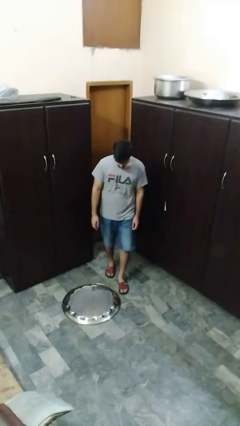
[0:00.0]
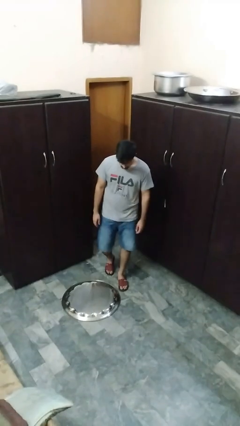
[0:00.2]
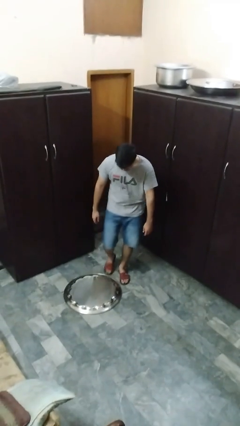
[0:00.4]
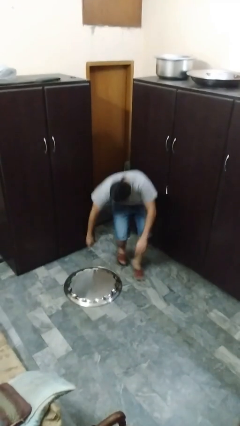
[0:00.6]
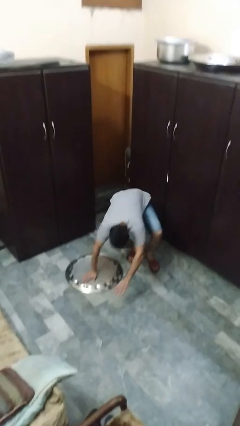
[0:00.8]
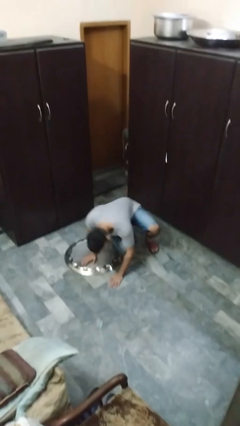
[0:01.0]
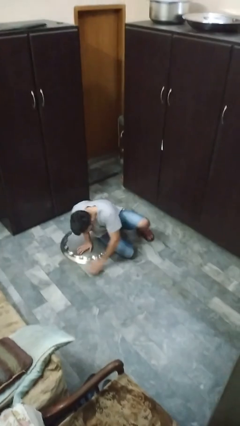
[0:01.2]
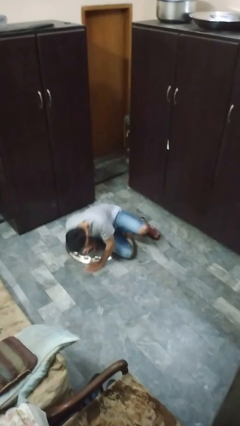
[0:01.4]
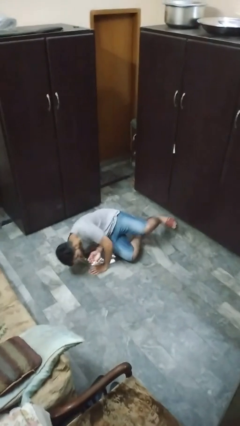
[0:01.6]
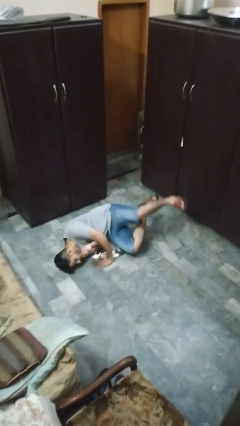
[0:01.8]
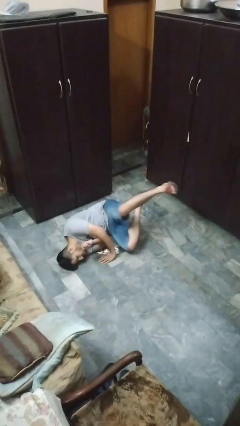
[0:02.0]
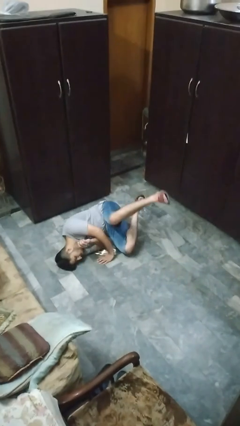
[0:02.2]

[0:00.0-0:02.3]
person trips on object on floor

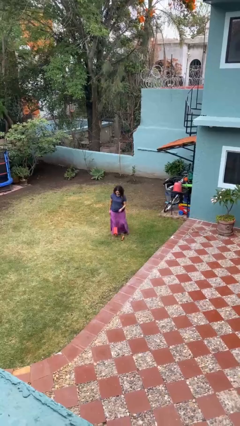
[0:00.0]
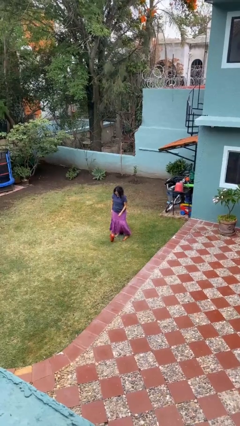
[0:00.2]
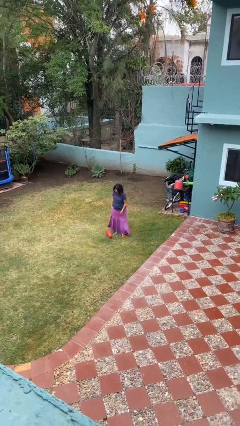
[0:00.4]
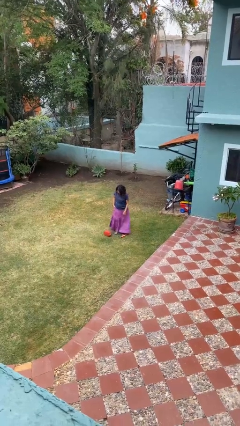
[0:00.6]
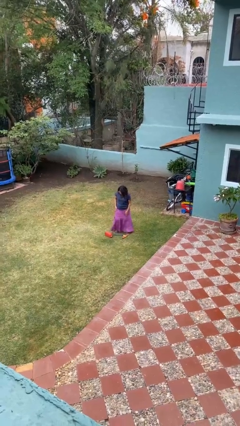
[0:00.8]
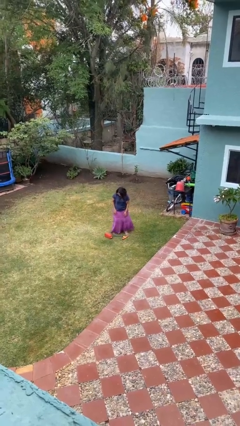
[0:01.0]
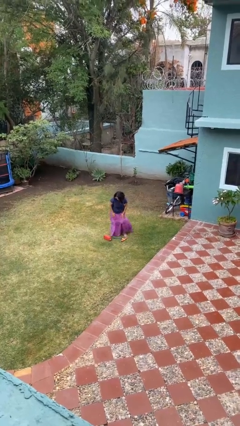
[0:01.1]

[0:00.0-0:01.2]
person drops object

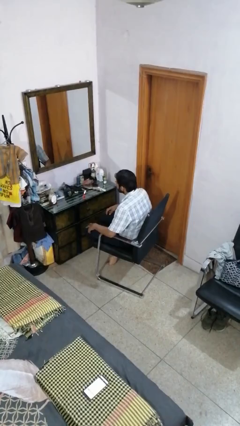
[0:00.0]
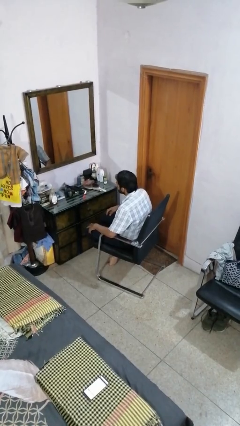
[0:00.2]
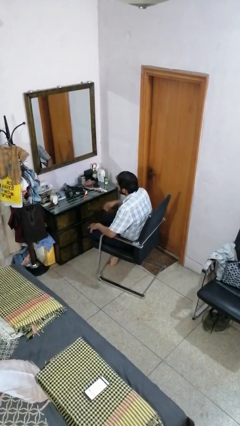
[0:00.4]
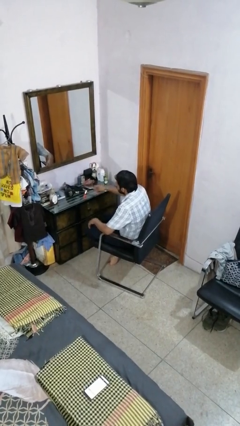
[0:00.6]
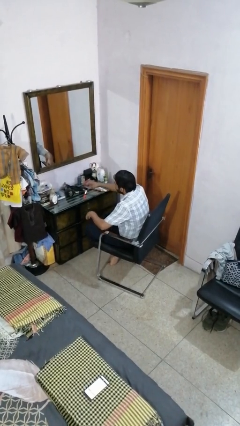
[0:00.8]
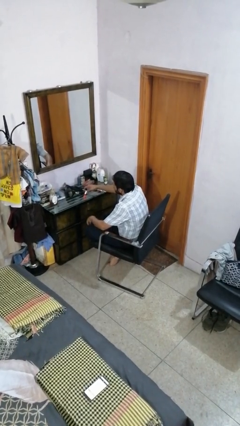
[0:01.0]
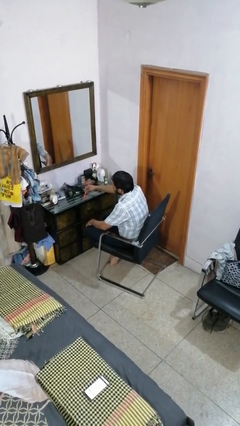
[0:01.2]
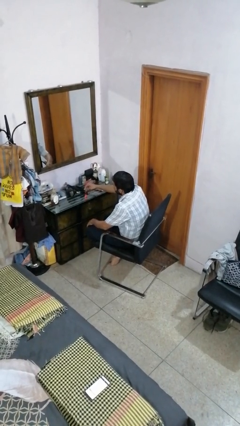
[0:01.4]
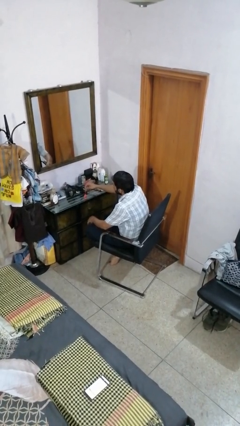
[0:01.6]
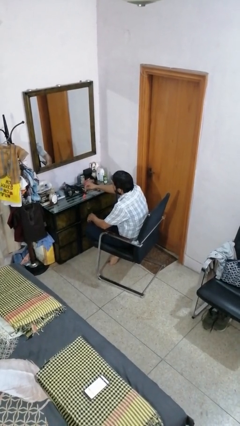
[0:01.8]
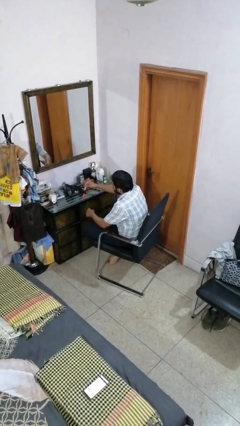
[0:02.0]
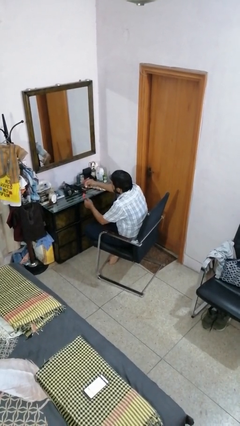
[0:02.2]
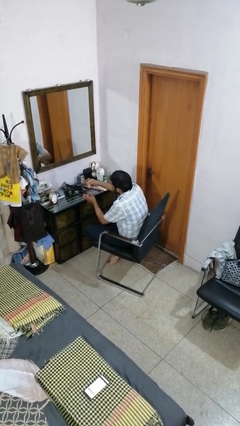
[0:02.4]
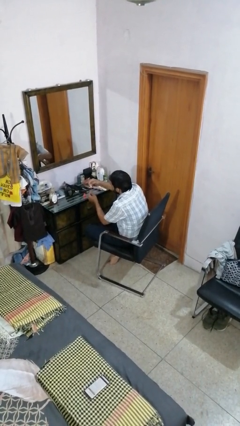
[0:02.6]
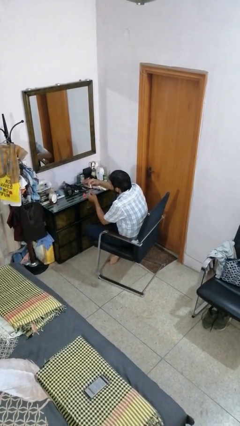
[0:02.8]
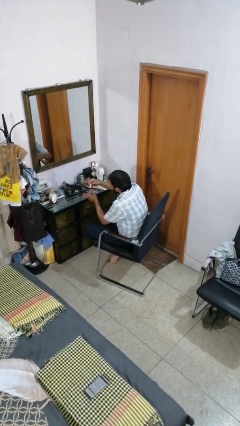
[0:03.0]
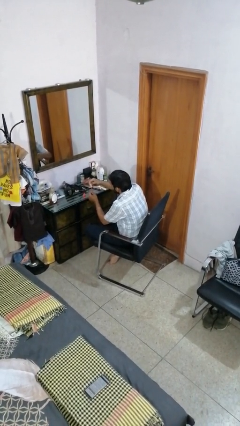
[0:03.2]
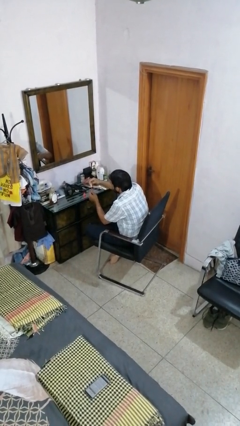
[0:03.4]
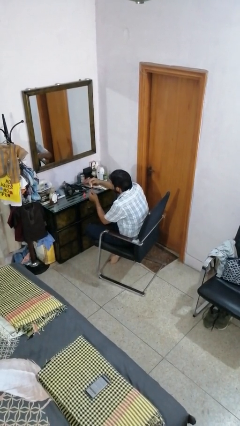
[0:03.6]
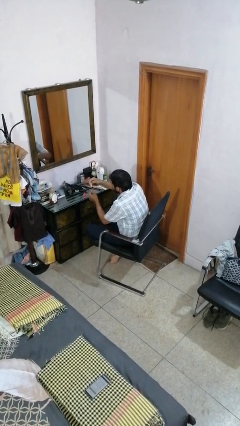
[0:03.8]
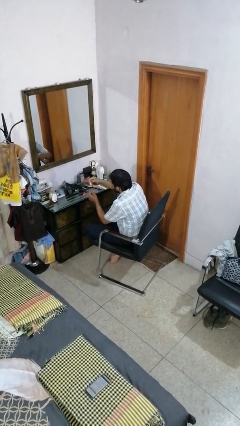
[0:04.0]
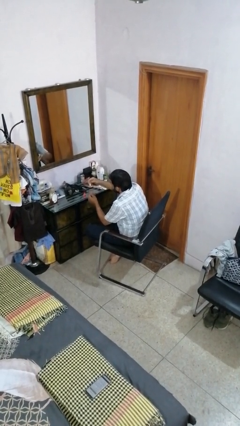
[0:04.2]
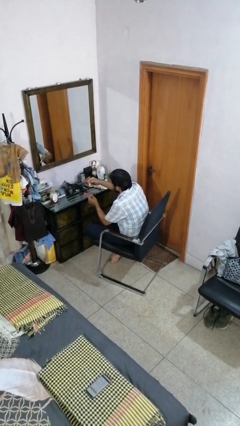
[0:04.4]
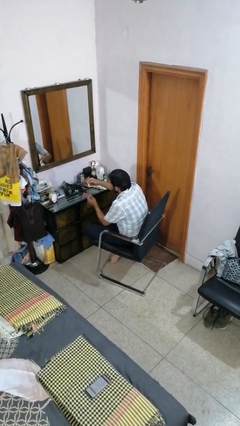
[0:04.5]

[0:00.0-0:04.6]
person paints fingernails

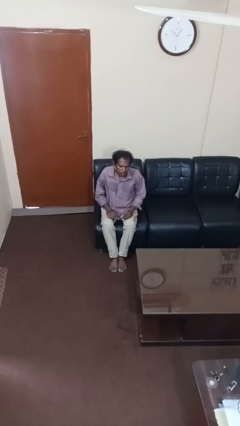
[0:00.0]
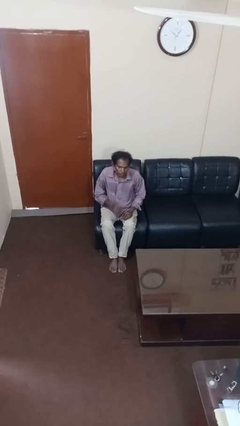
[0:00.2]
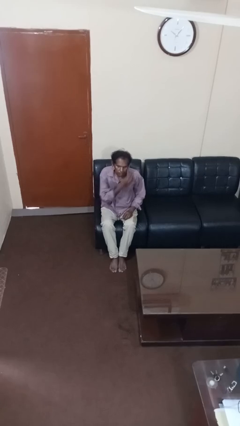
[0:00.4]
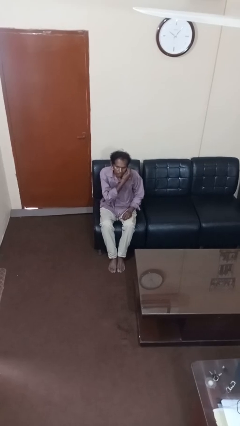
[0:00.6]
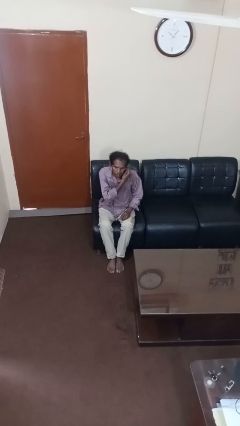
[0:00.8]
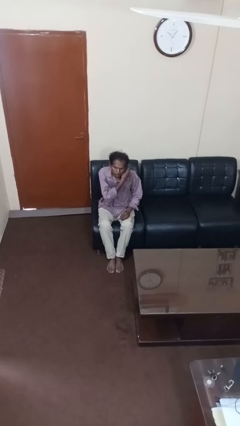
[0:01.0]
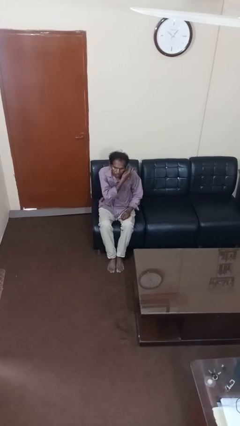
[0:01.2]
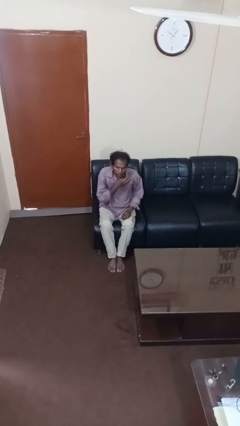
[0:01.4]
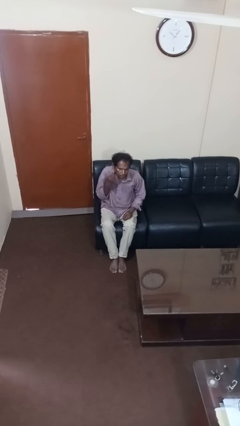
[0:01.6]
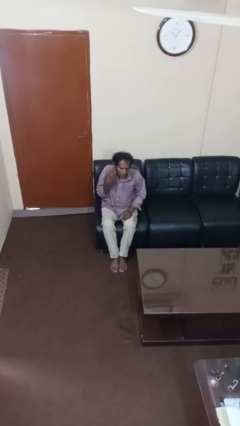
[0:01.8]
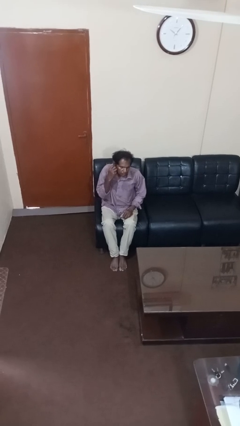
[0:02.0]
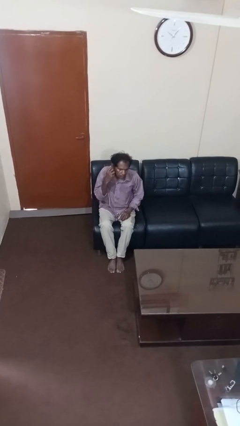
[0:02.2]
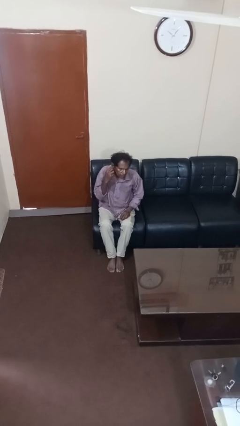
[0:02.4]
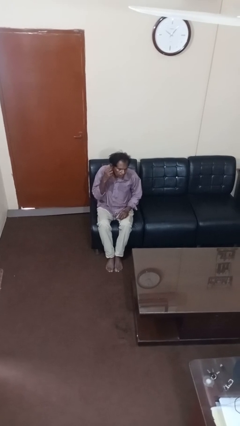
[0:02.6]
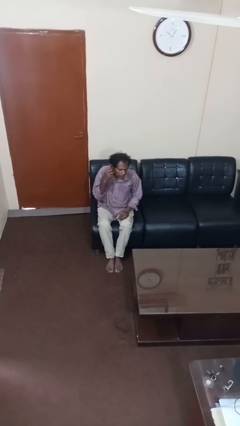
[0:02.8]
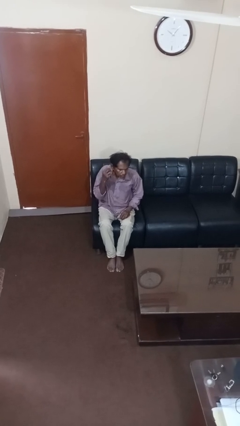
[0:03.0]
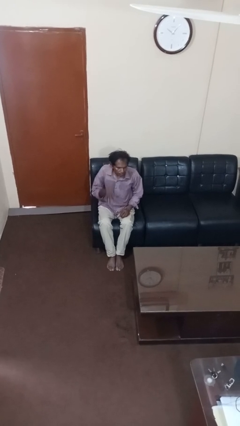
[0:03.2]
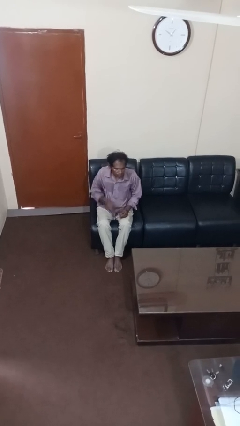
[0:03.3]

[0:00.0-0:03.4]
person takes off earrings

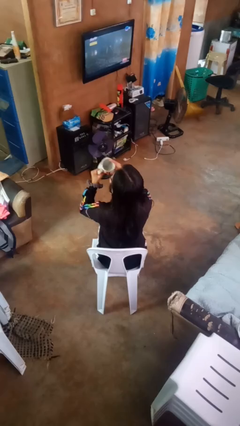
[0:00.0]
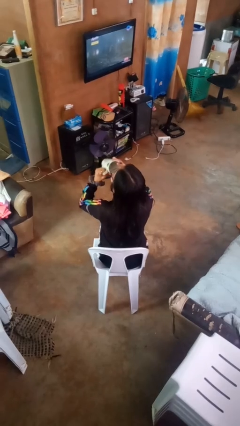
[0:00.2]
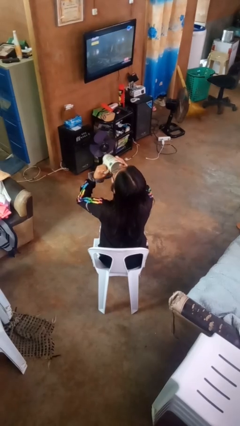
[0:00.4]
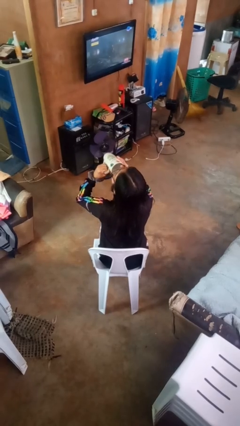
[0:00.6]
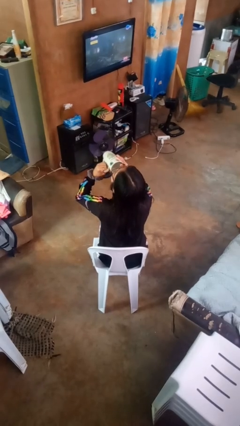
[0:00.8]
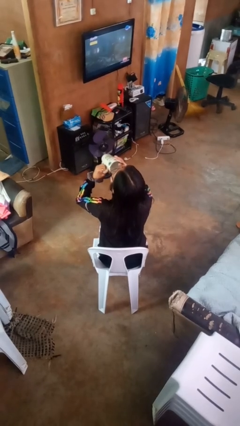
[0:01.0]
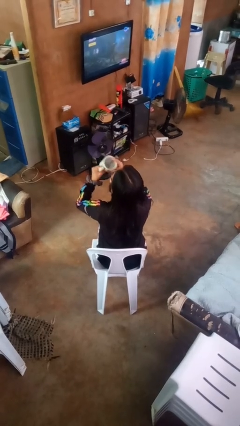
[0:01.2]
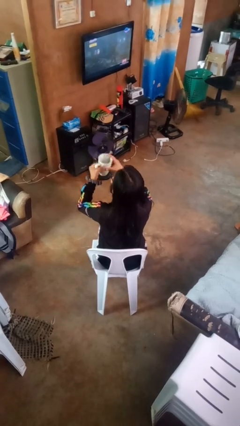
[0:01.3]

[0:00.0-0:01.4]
person drinks from mug

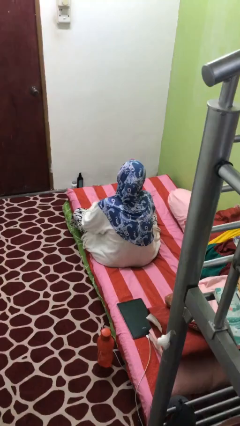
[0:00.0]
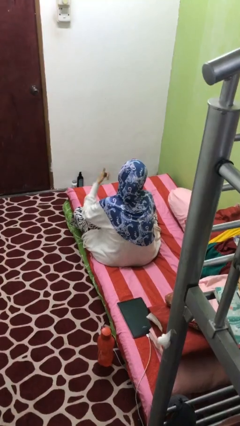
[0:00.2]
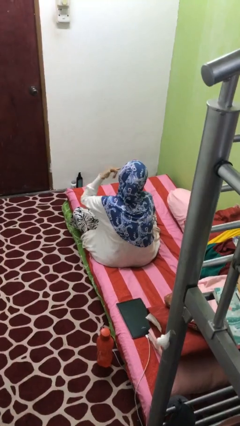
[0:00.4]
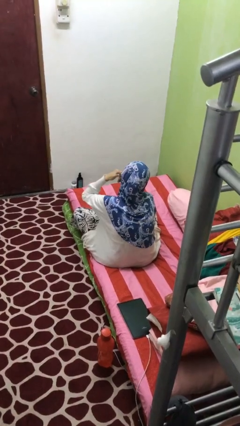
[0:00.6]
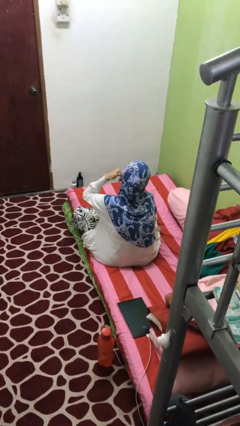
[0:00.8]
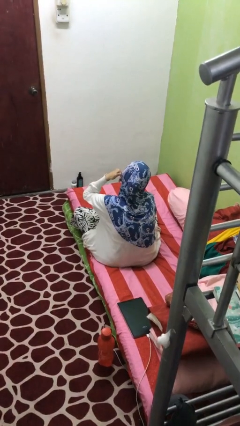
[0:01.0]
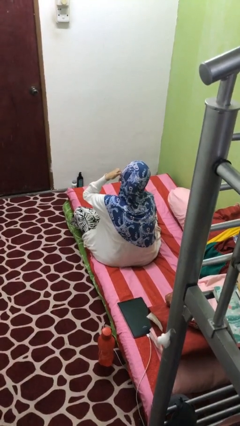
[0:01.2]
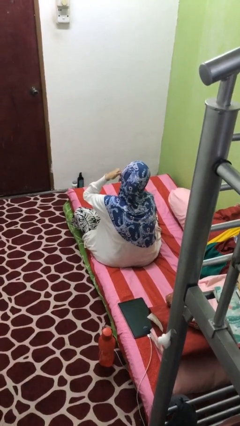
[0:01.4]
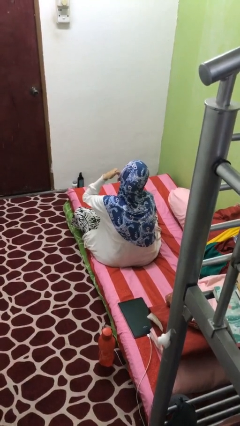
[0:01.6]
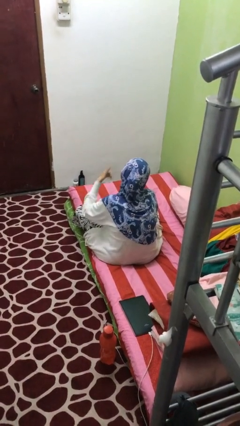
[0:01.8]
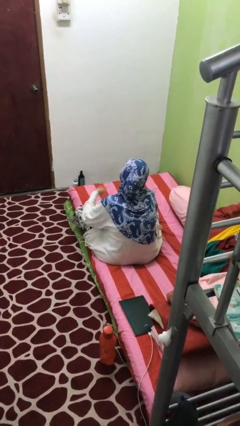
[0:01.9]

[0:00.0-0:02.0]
person gestures call me

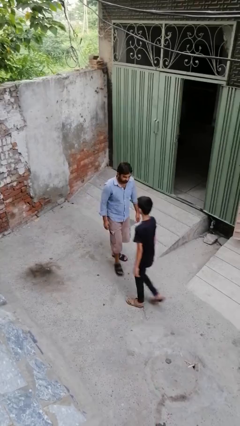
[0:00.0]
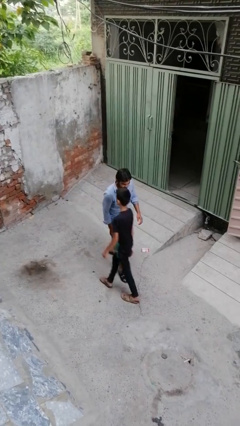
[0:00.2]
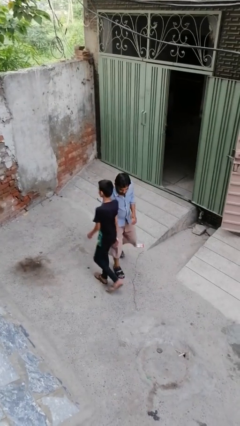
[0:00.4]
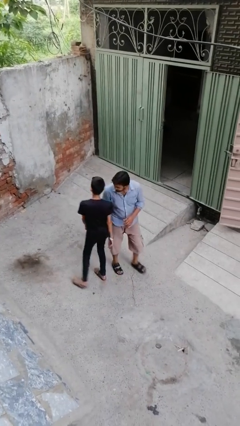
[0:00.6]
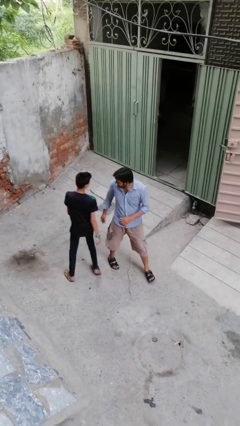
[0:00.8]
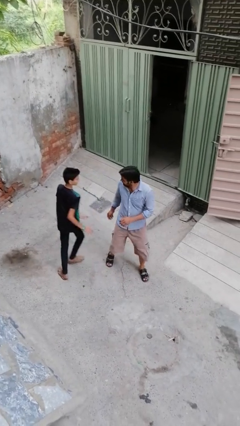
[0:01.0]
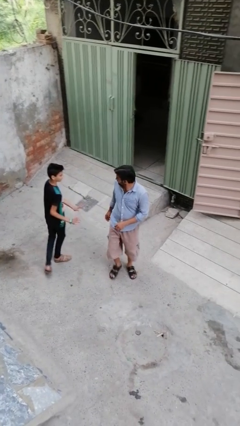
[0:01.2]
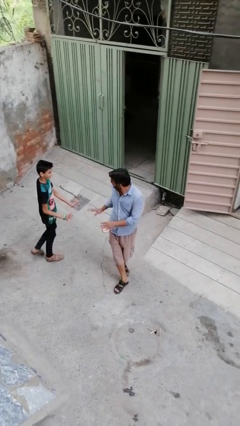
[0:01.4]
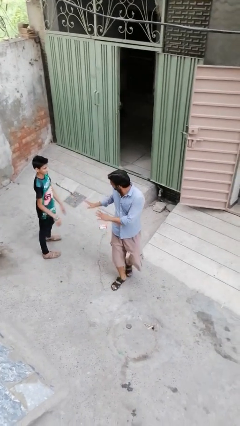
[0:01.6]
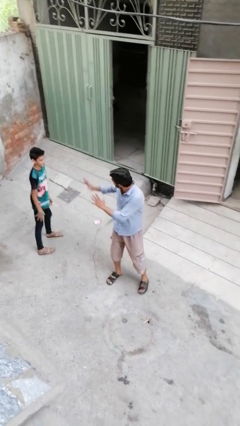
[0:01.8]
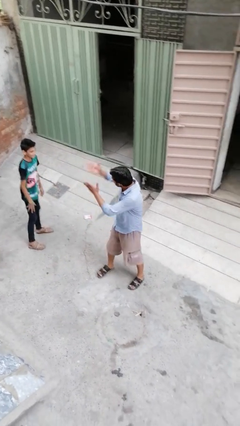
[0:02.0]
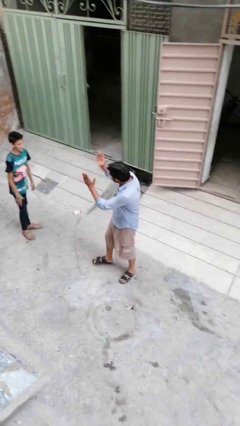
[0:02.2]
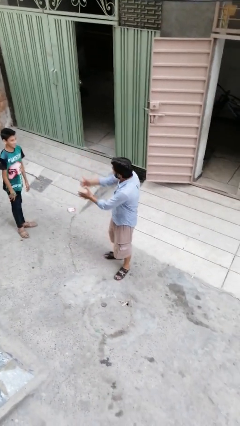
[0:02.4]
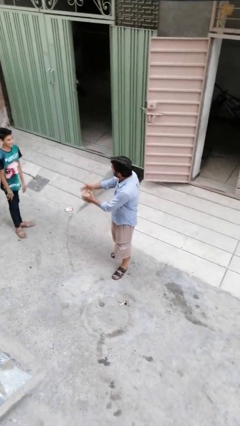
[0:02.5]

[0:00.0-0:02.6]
person bumps into person
